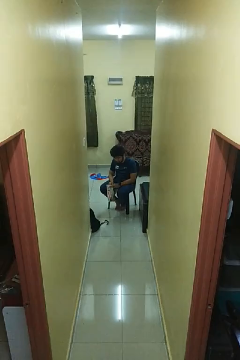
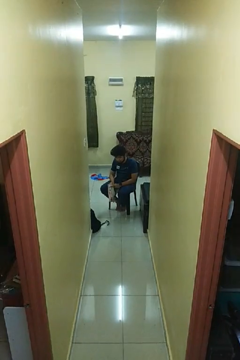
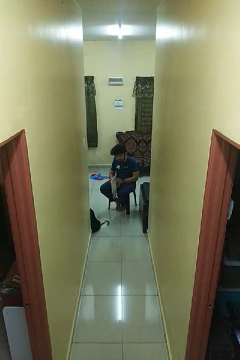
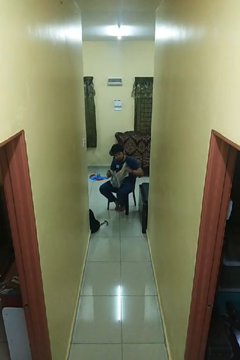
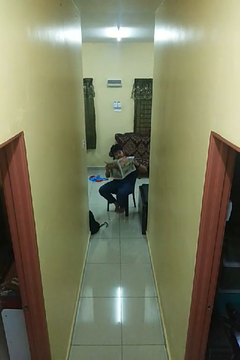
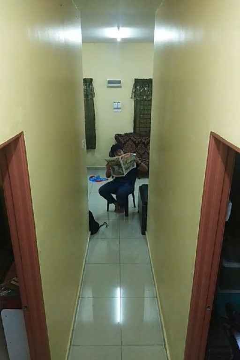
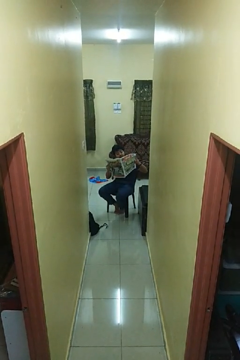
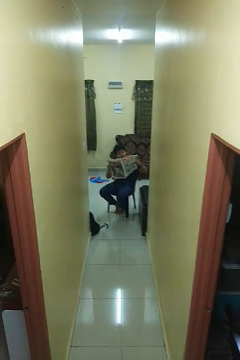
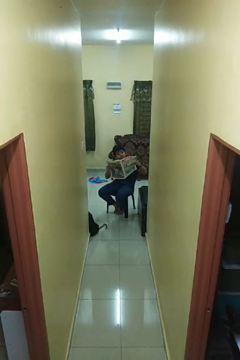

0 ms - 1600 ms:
person reads newspaper

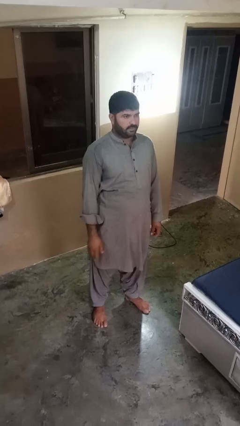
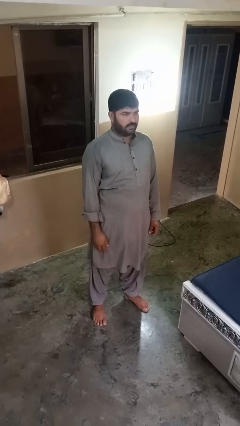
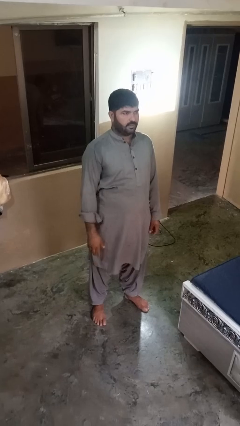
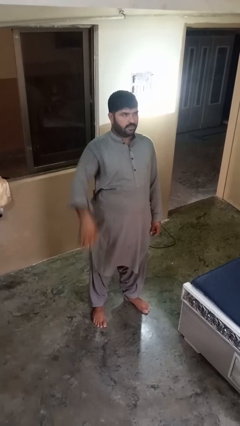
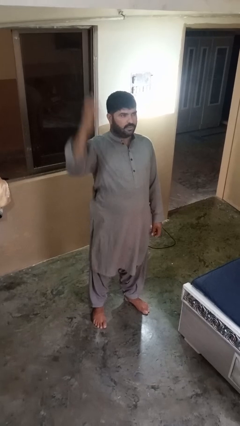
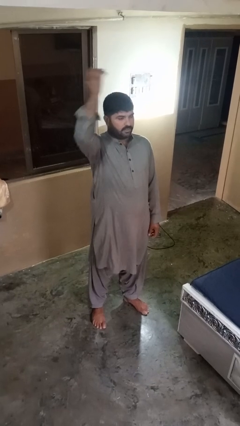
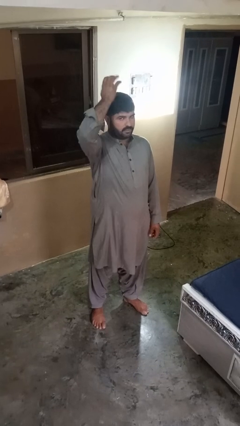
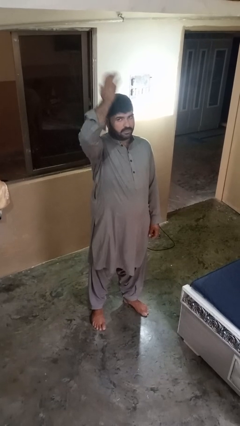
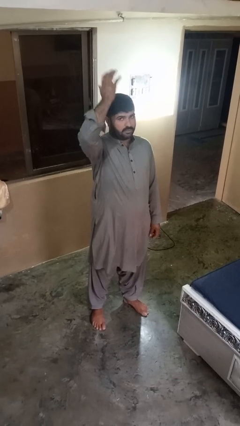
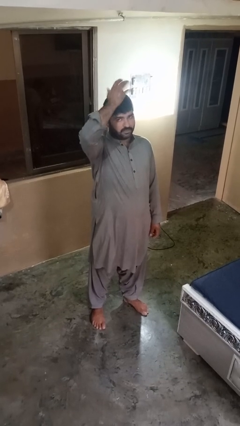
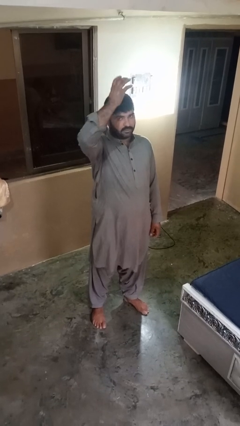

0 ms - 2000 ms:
person pats head

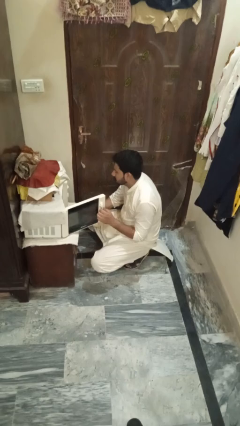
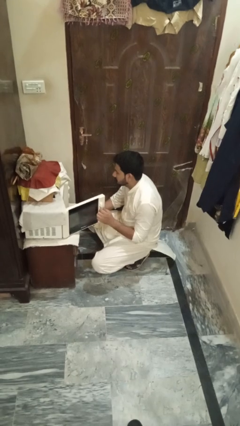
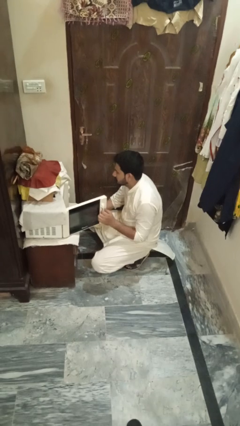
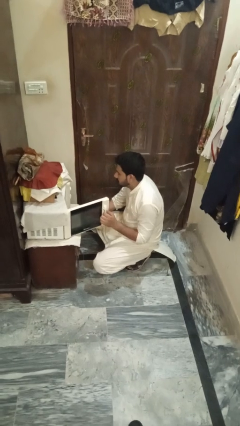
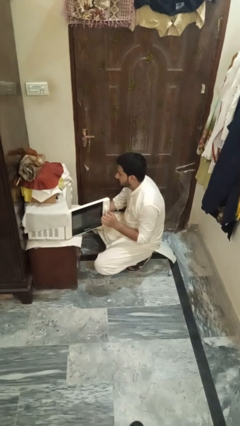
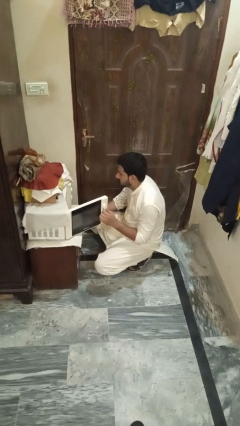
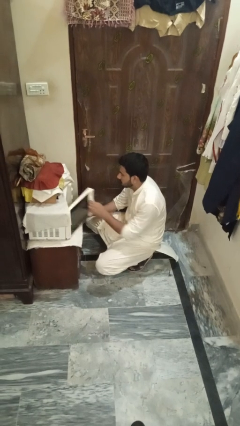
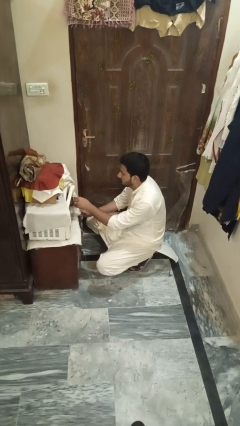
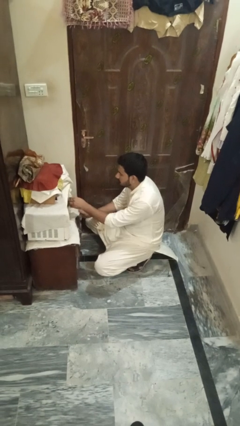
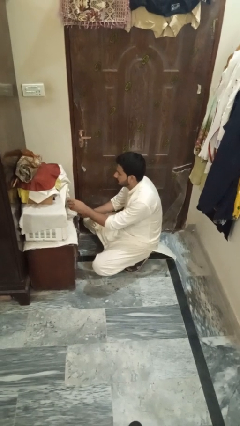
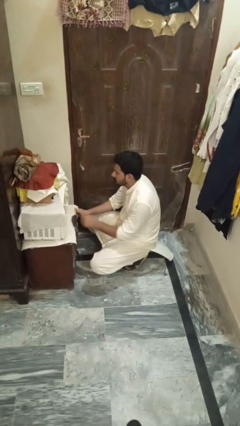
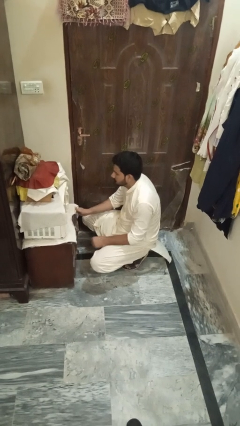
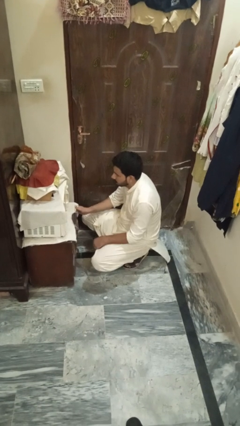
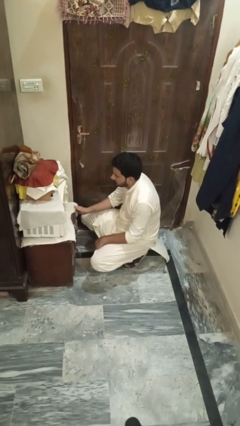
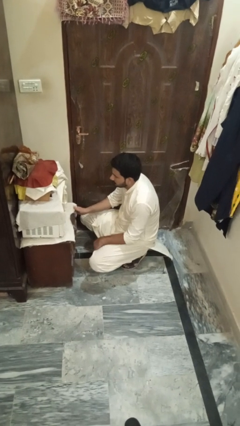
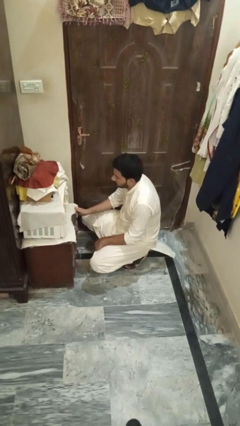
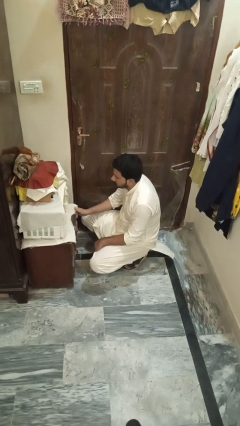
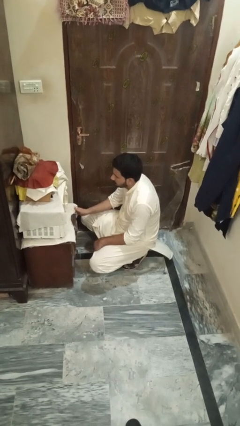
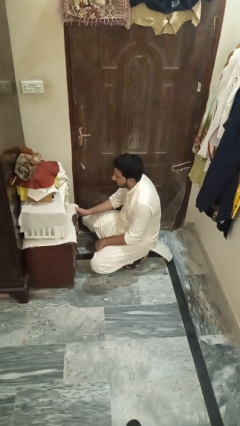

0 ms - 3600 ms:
person closes microwave

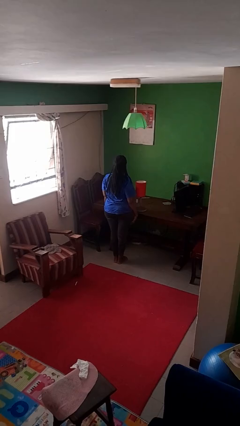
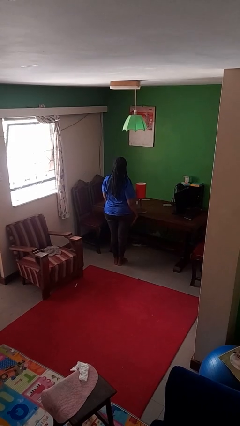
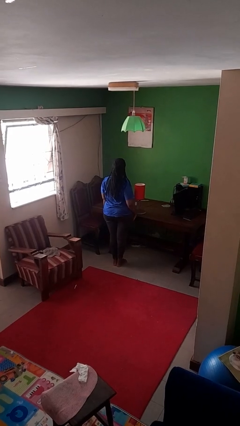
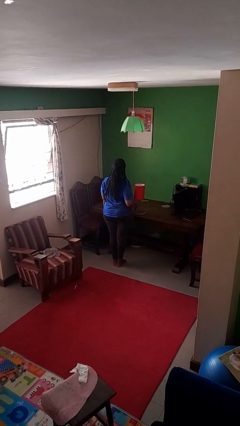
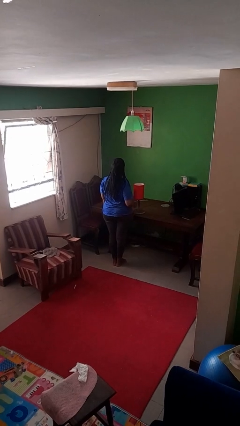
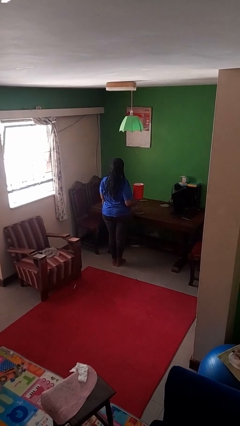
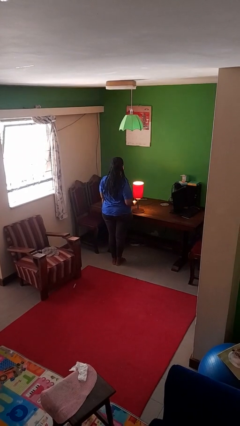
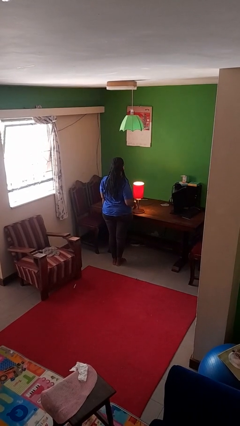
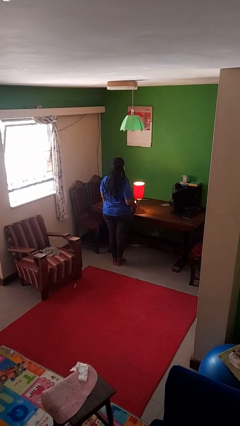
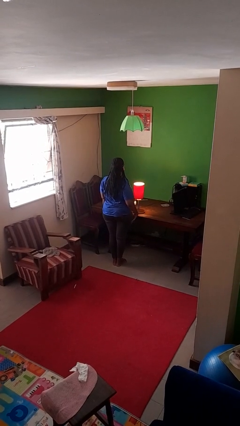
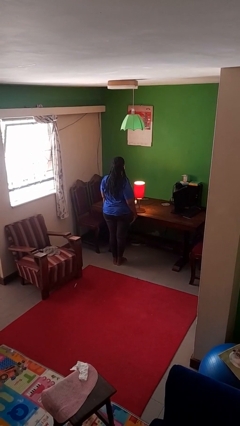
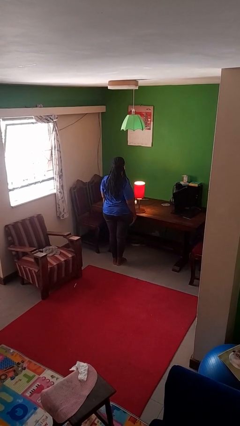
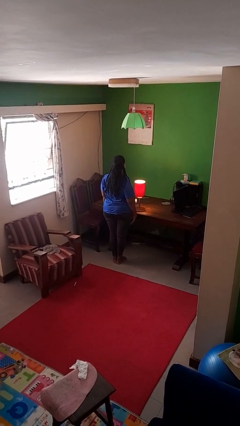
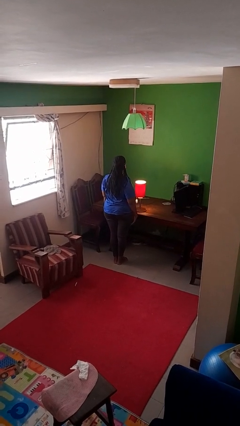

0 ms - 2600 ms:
person turns on lamp

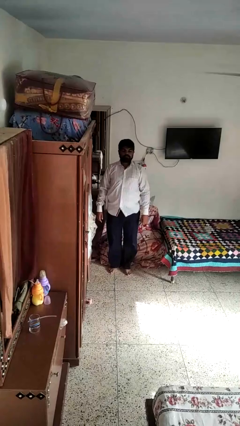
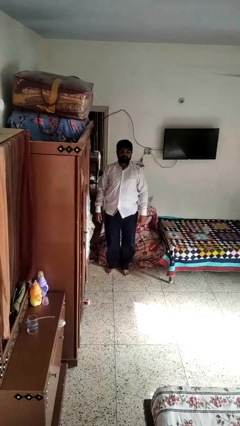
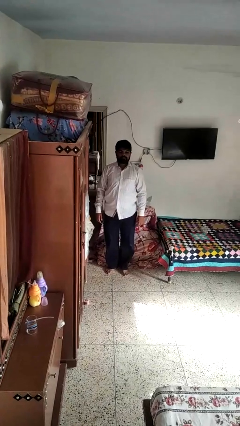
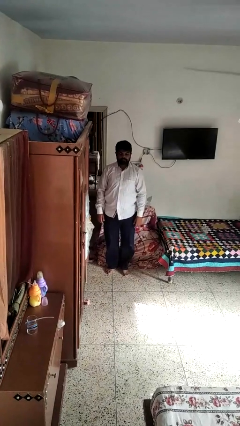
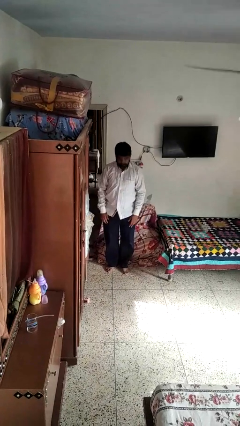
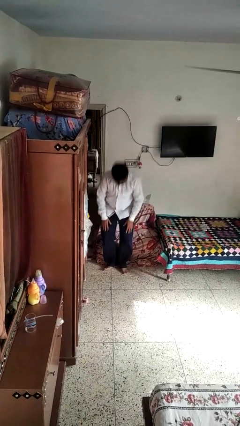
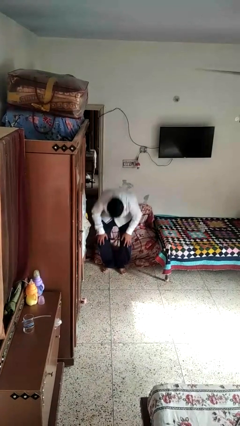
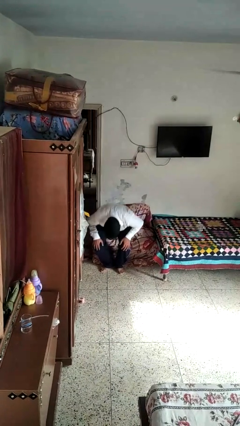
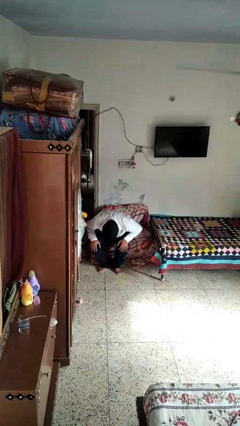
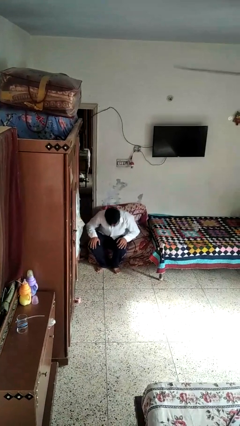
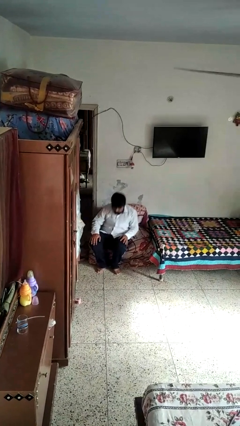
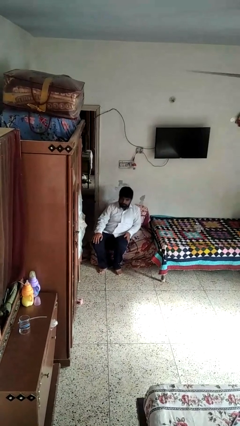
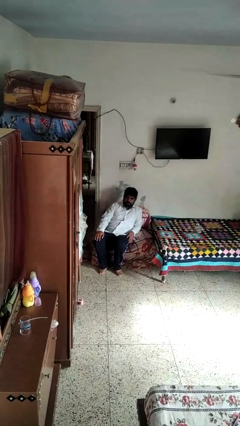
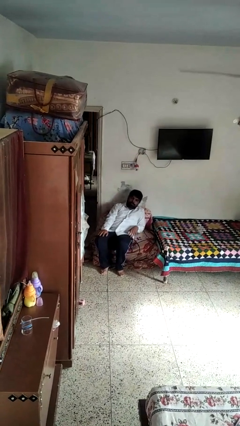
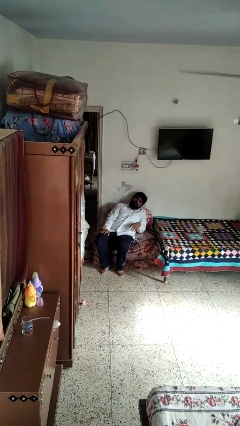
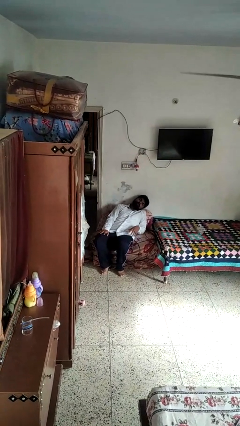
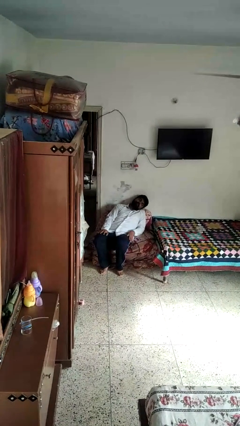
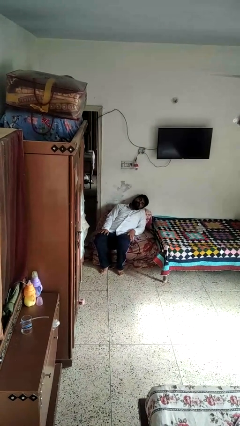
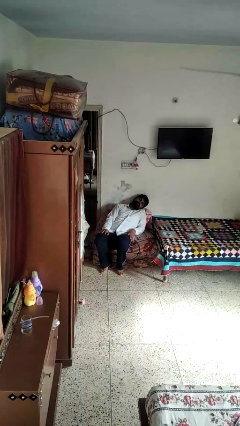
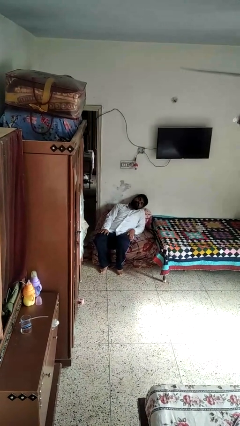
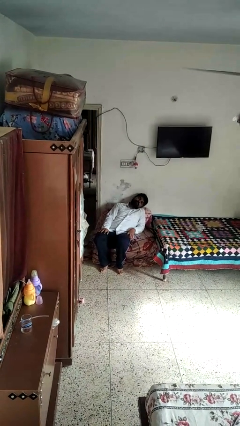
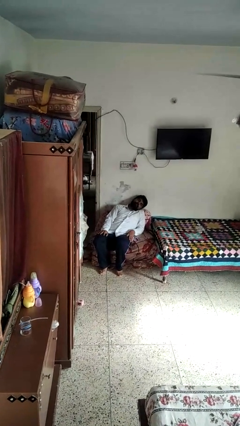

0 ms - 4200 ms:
person lies down on couch

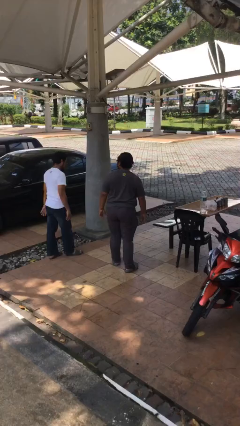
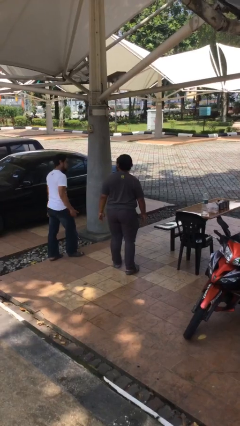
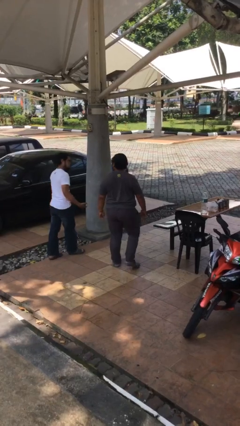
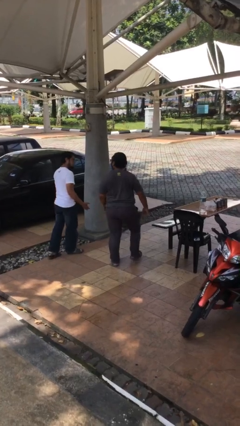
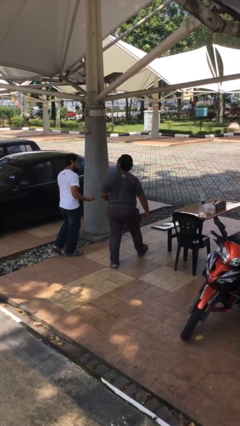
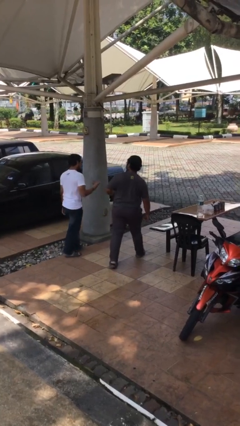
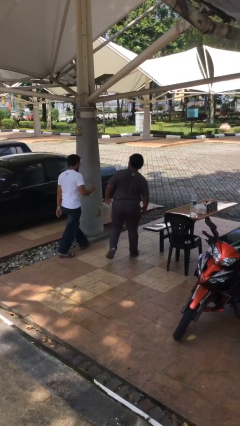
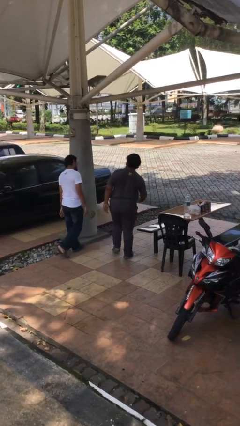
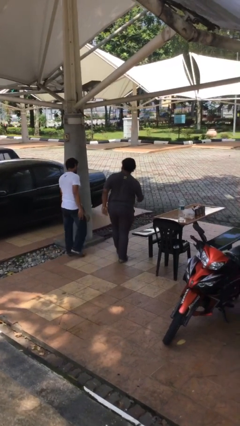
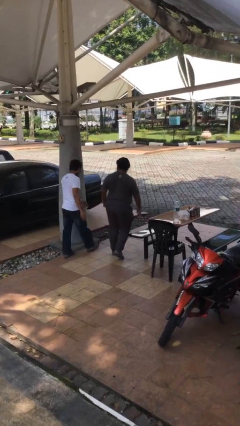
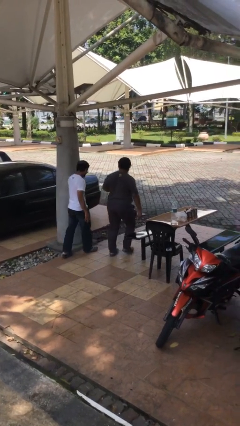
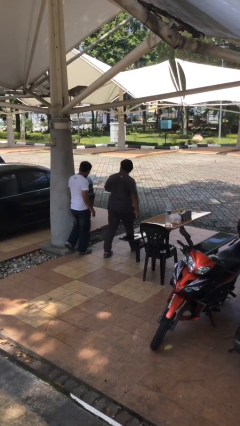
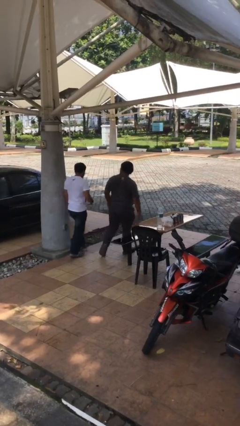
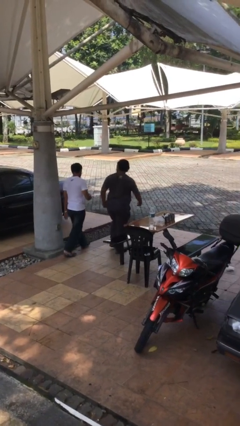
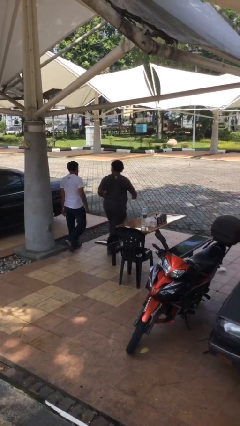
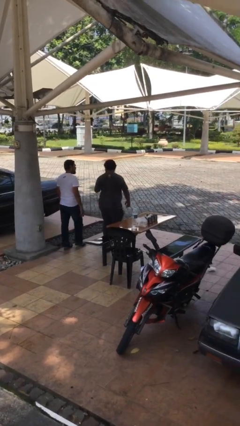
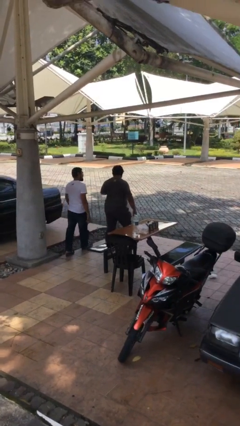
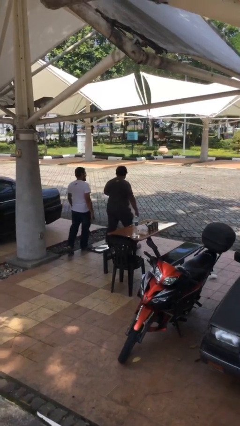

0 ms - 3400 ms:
person talks to person
